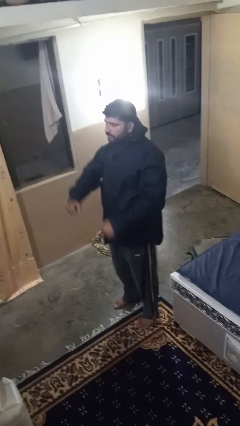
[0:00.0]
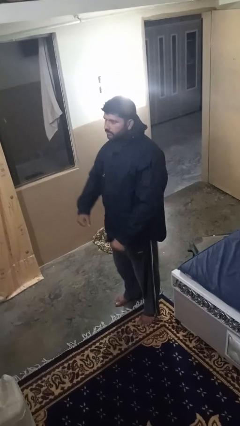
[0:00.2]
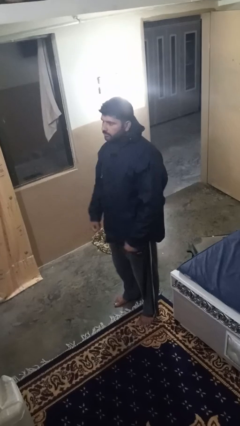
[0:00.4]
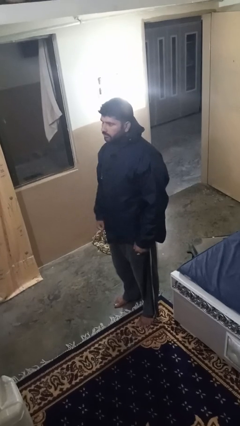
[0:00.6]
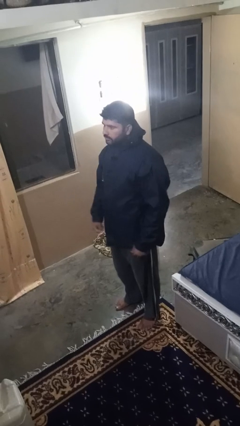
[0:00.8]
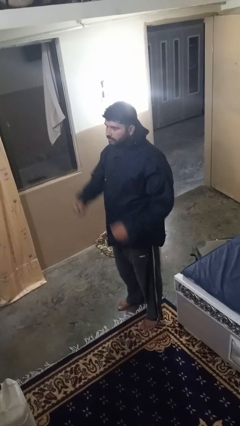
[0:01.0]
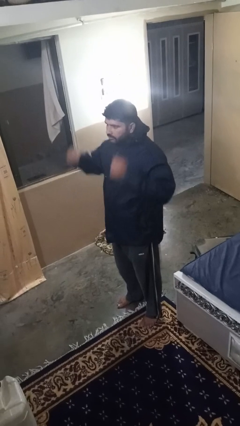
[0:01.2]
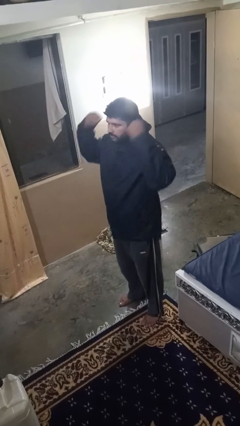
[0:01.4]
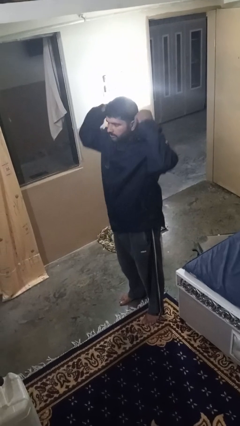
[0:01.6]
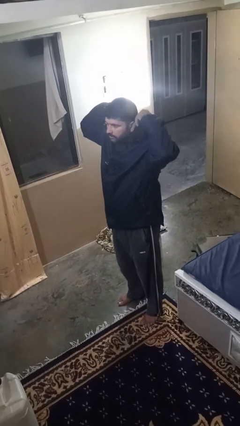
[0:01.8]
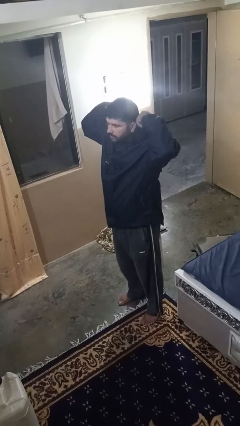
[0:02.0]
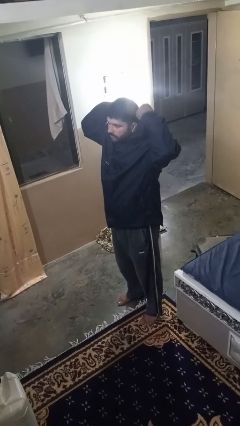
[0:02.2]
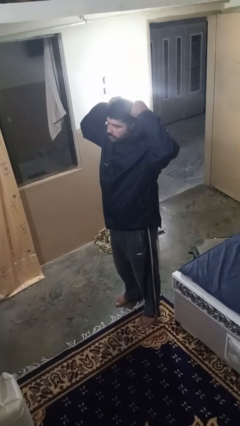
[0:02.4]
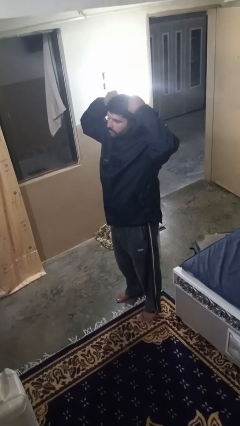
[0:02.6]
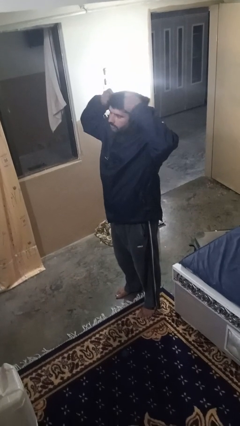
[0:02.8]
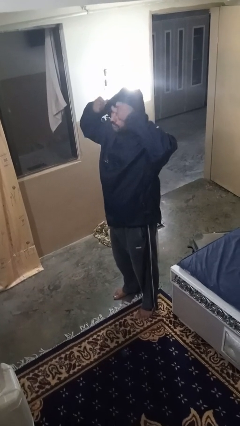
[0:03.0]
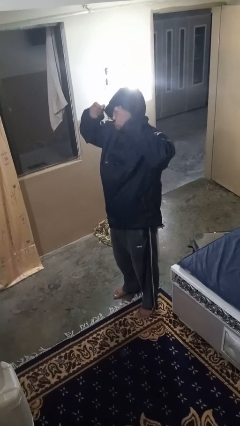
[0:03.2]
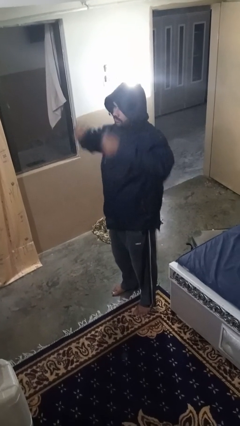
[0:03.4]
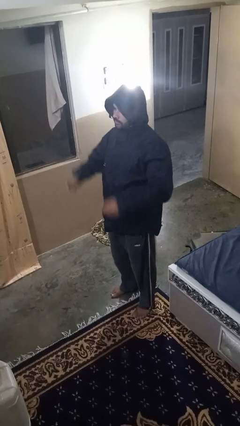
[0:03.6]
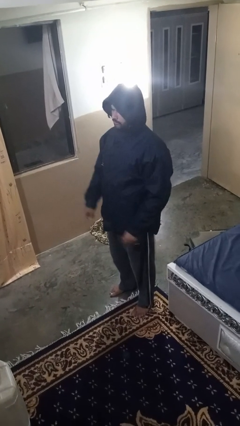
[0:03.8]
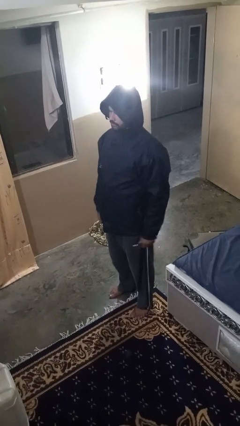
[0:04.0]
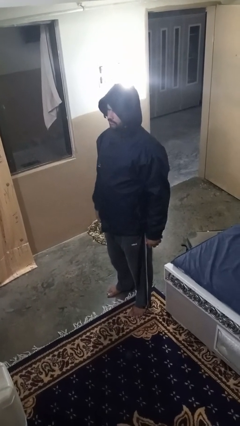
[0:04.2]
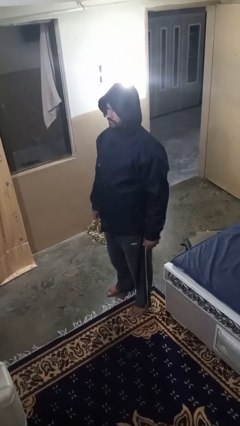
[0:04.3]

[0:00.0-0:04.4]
person puts on hoodie

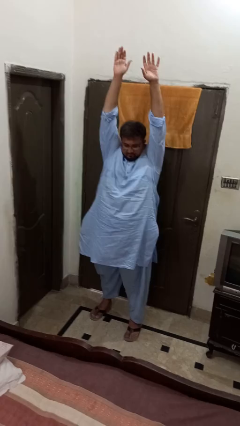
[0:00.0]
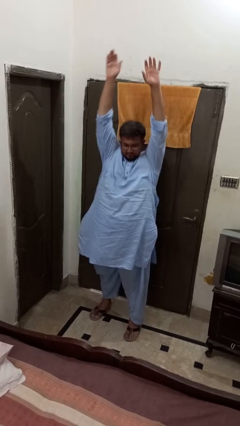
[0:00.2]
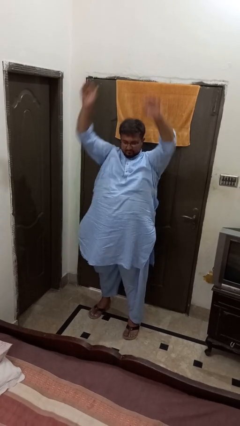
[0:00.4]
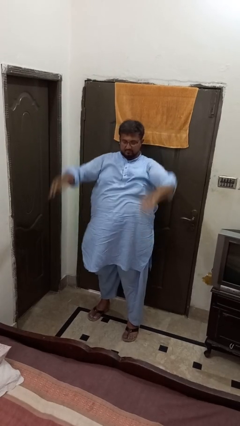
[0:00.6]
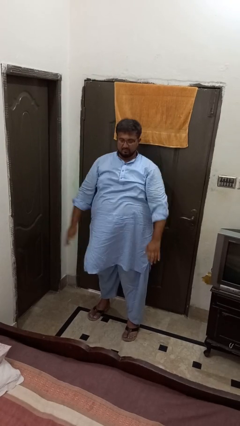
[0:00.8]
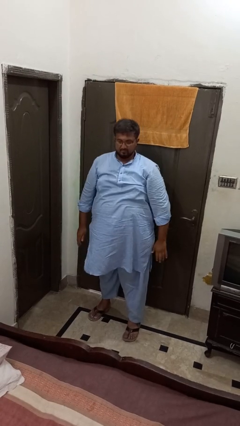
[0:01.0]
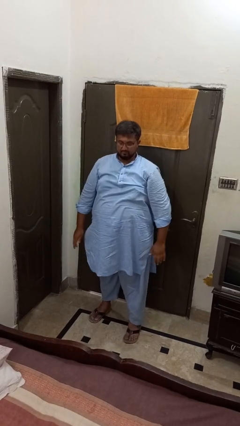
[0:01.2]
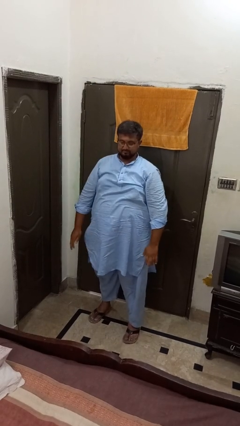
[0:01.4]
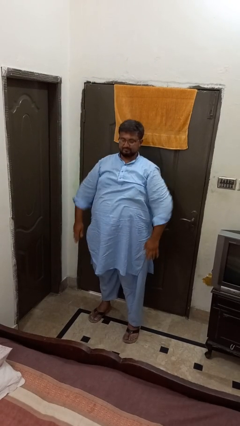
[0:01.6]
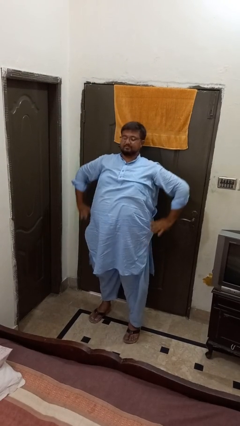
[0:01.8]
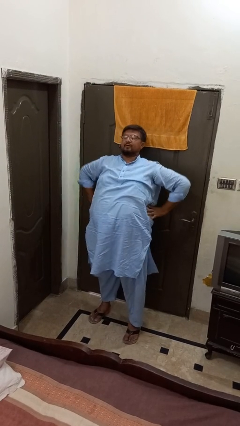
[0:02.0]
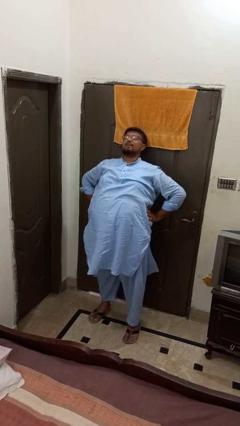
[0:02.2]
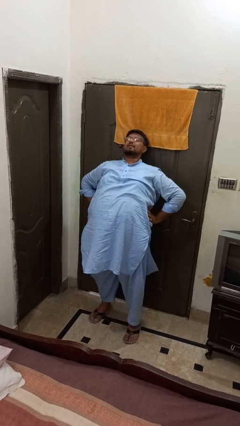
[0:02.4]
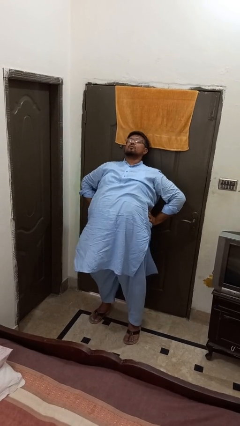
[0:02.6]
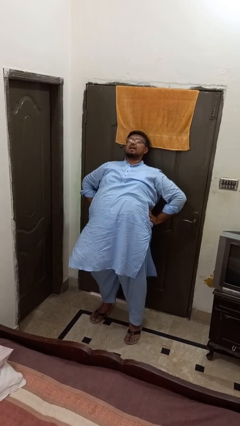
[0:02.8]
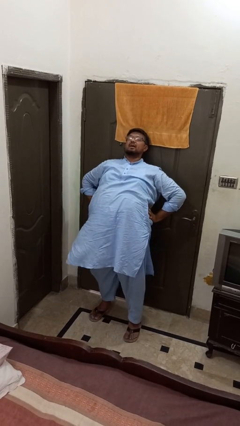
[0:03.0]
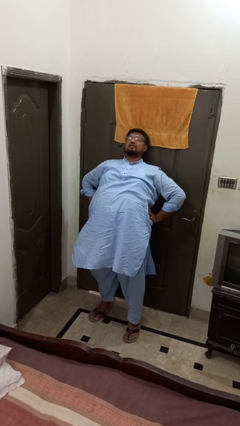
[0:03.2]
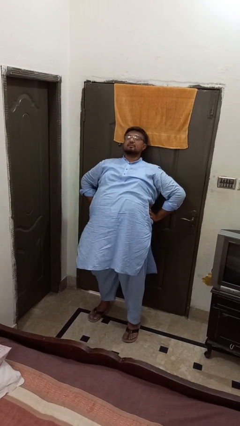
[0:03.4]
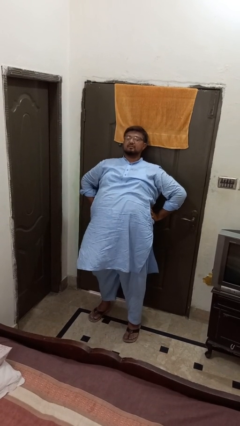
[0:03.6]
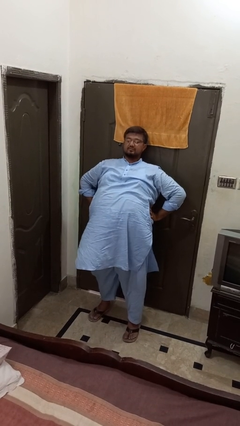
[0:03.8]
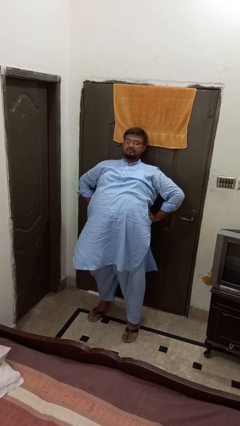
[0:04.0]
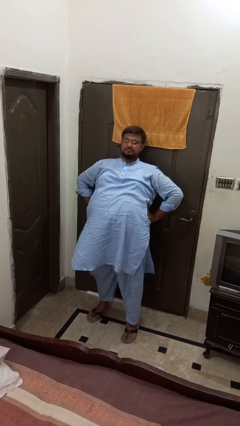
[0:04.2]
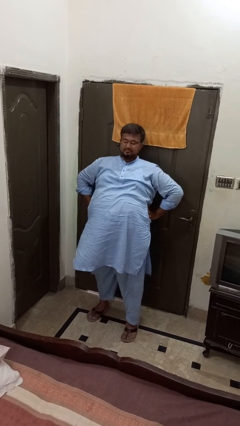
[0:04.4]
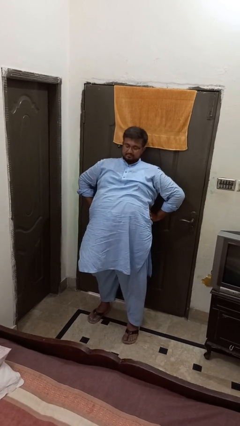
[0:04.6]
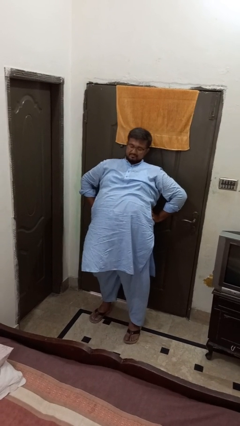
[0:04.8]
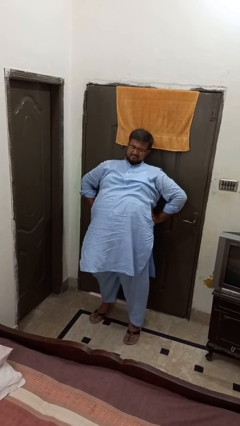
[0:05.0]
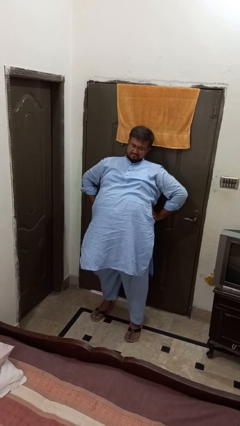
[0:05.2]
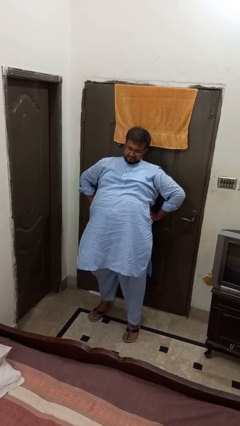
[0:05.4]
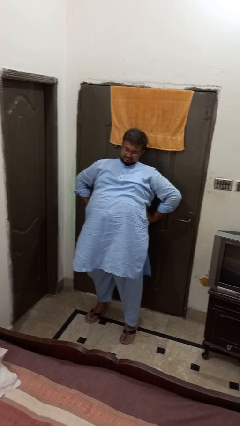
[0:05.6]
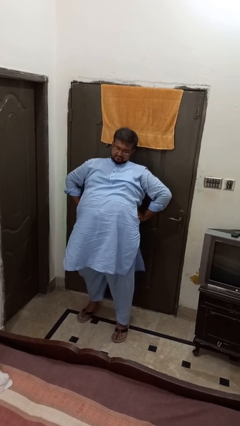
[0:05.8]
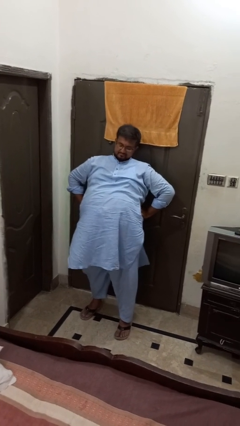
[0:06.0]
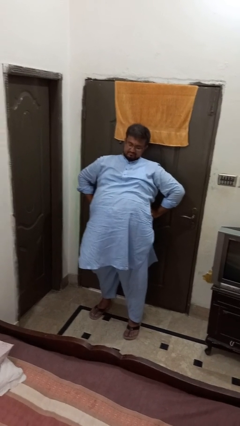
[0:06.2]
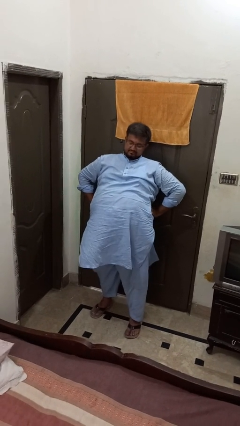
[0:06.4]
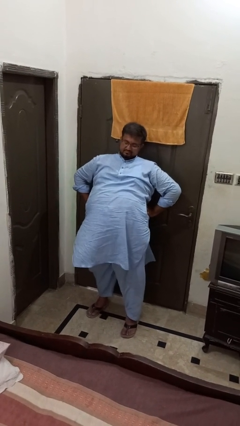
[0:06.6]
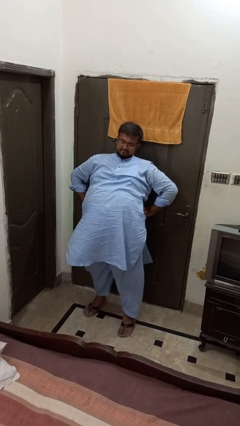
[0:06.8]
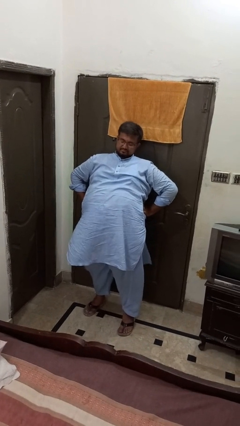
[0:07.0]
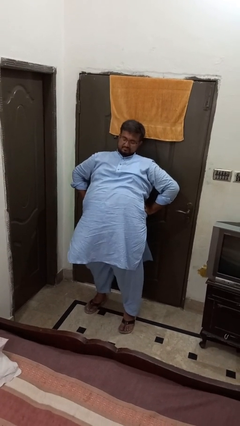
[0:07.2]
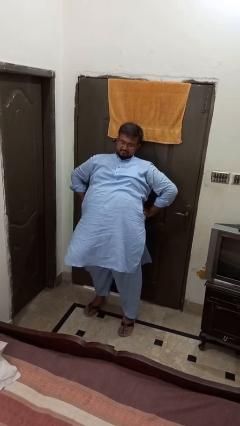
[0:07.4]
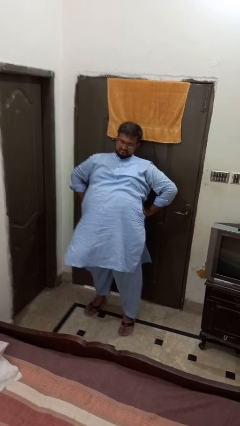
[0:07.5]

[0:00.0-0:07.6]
person stretches back

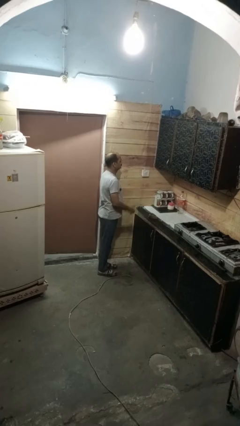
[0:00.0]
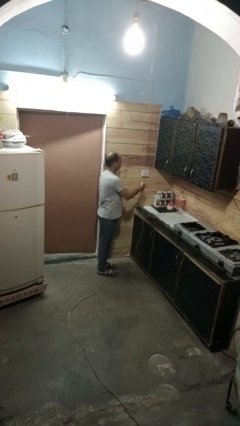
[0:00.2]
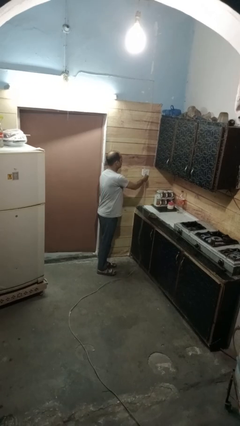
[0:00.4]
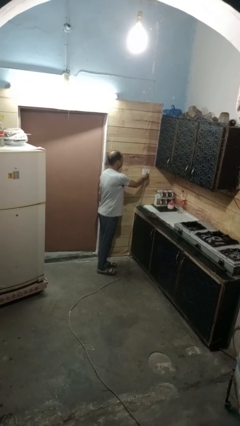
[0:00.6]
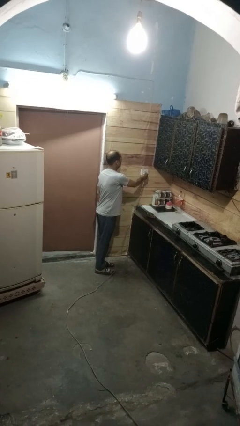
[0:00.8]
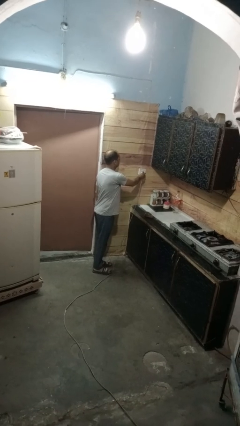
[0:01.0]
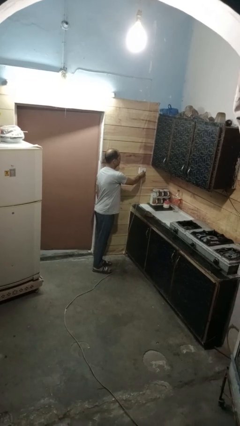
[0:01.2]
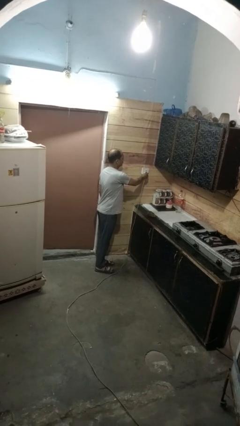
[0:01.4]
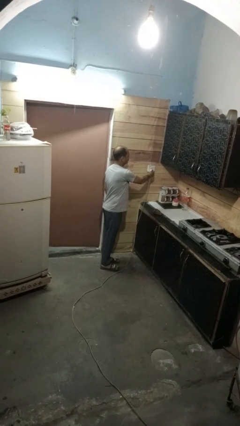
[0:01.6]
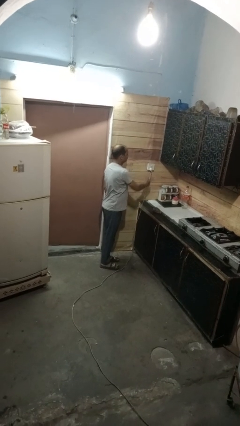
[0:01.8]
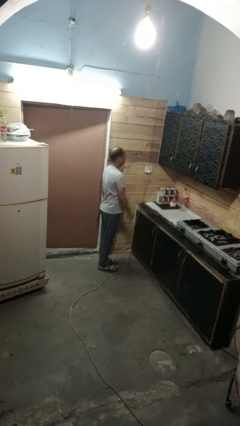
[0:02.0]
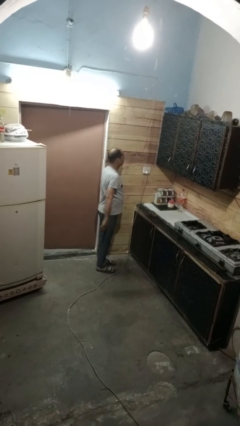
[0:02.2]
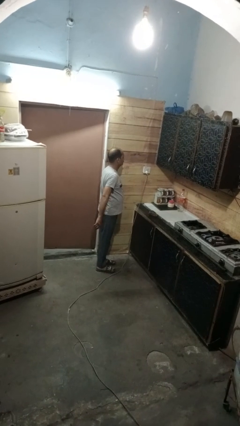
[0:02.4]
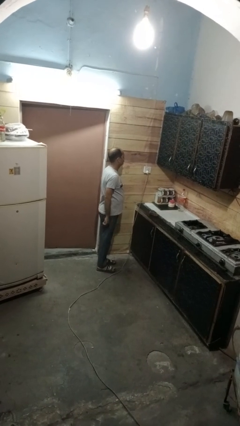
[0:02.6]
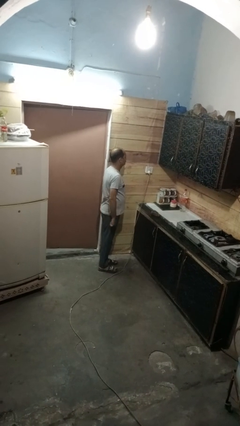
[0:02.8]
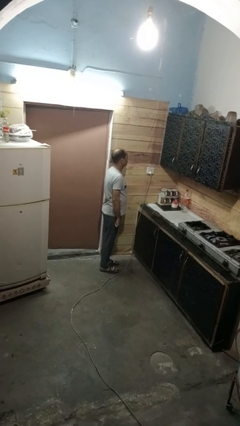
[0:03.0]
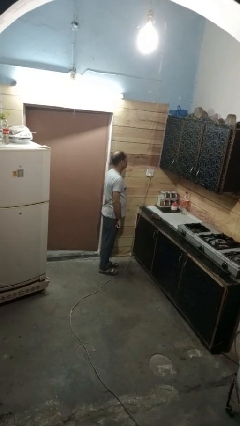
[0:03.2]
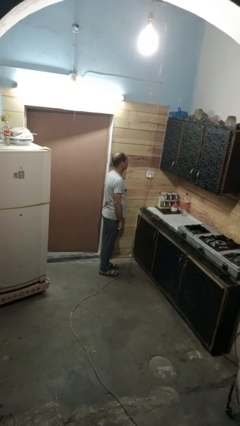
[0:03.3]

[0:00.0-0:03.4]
person plugs into electrical socket

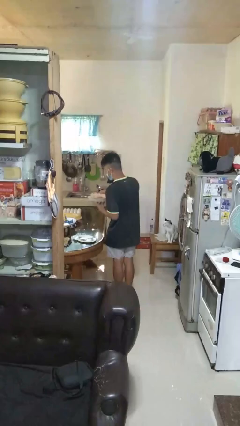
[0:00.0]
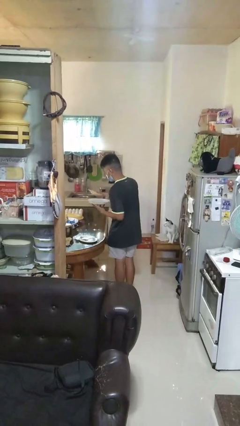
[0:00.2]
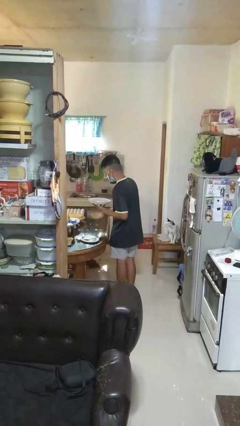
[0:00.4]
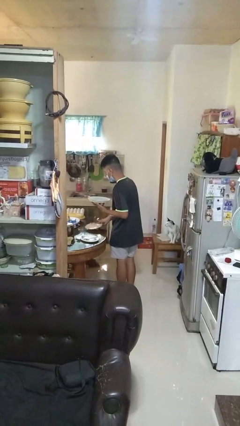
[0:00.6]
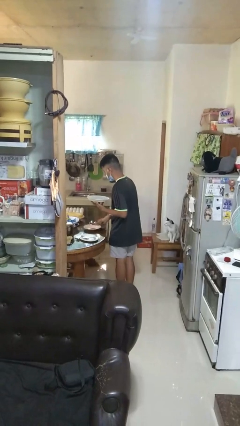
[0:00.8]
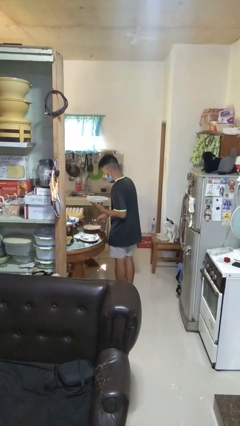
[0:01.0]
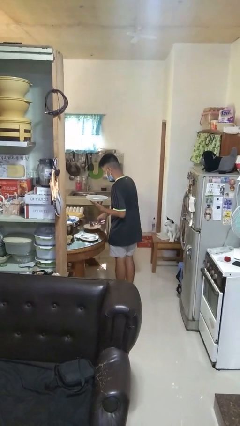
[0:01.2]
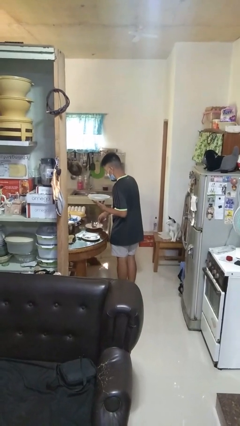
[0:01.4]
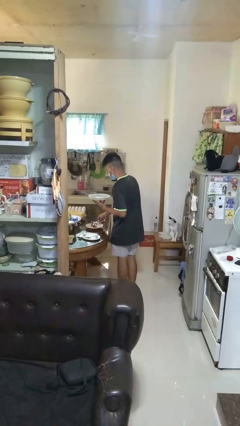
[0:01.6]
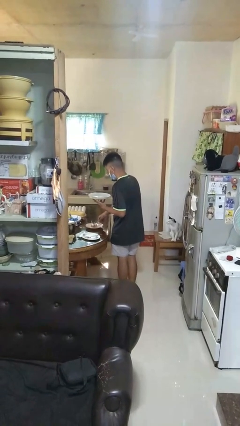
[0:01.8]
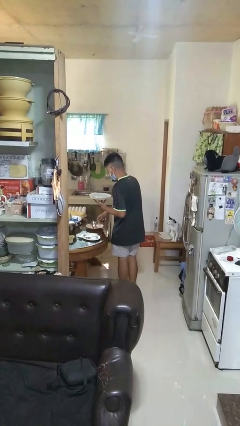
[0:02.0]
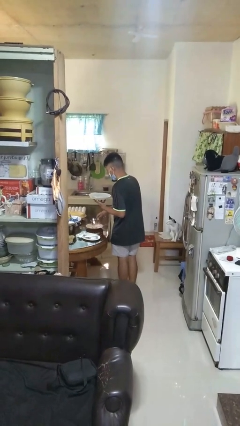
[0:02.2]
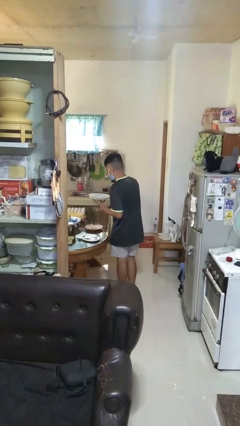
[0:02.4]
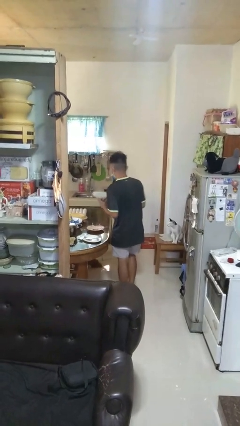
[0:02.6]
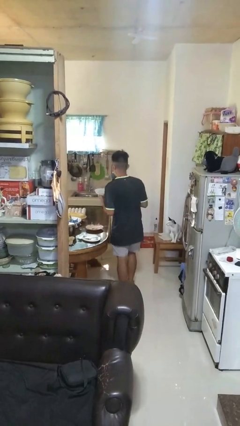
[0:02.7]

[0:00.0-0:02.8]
person sets table
